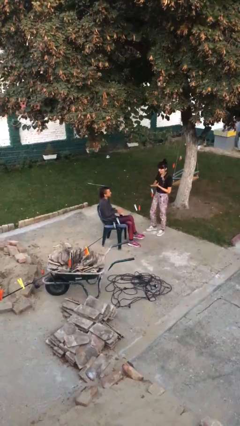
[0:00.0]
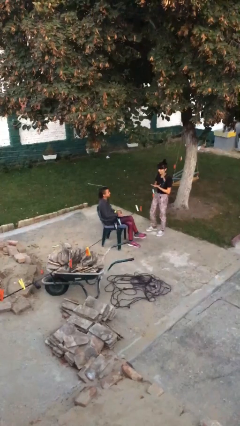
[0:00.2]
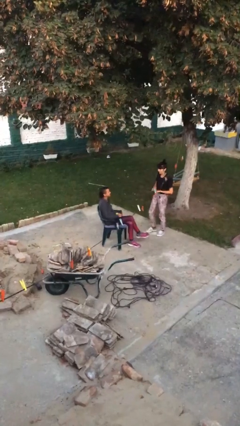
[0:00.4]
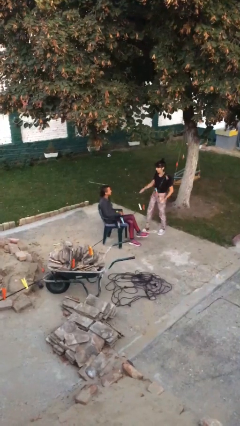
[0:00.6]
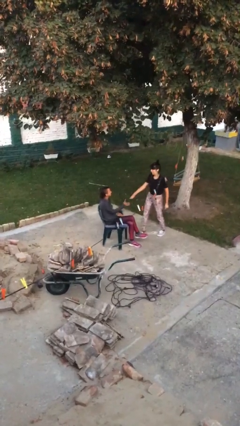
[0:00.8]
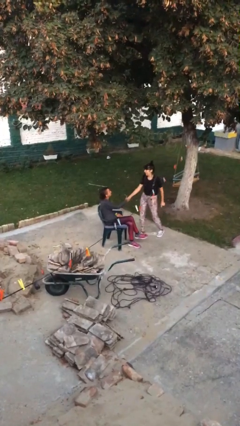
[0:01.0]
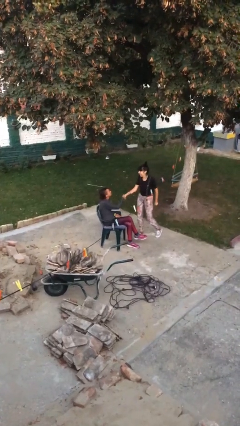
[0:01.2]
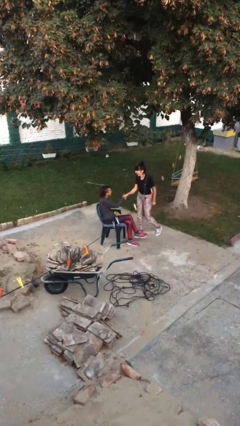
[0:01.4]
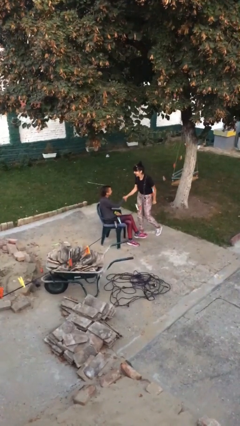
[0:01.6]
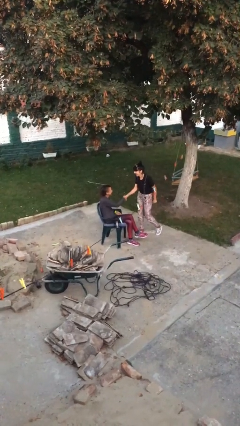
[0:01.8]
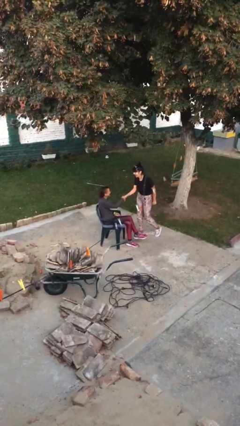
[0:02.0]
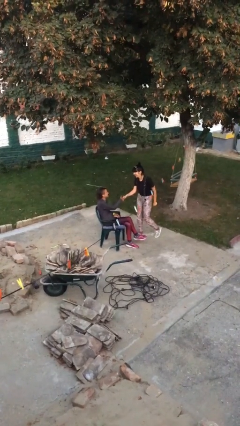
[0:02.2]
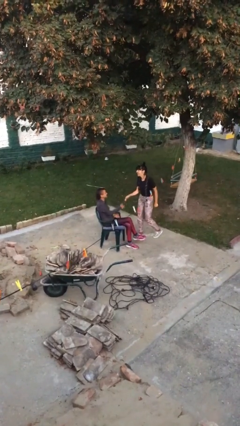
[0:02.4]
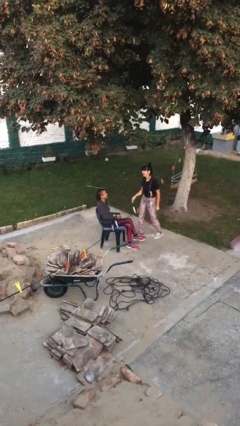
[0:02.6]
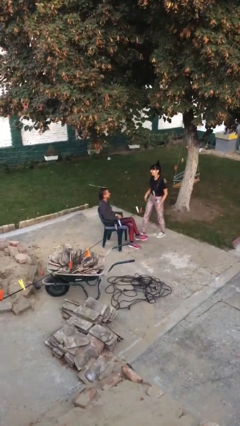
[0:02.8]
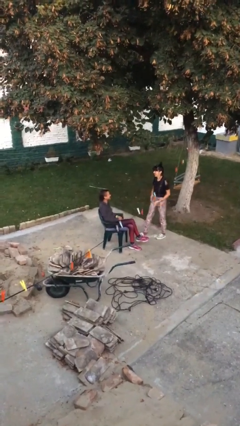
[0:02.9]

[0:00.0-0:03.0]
person shakes hand

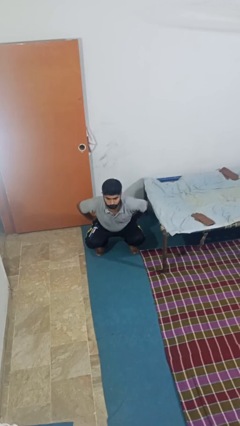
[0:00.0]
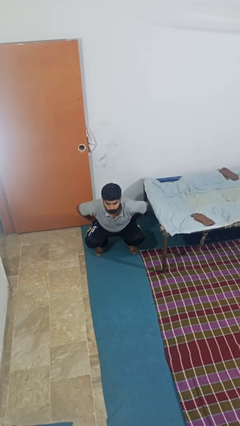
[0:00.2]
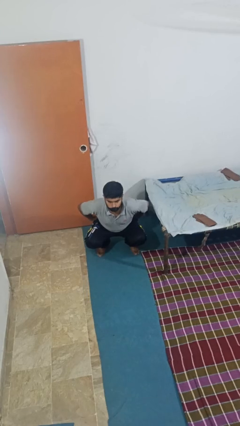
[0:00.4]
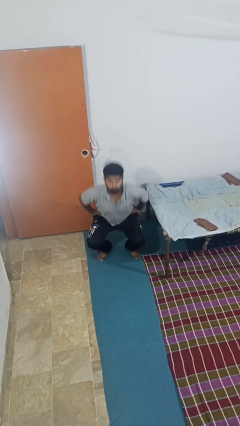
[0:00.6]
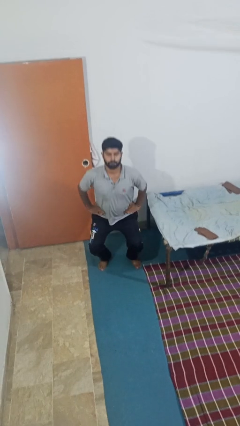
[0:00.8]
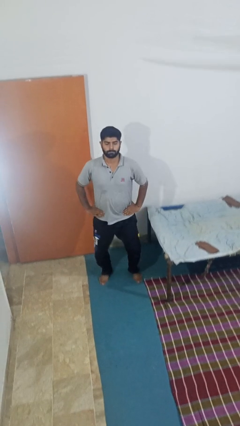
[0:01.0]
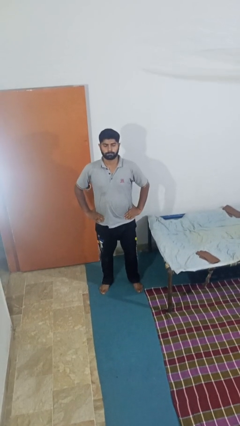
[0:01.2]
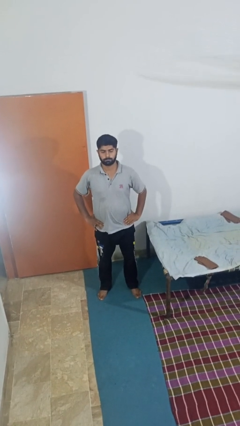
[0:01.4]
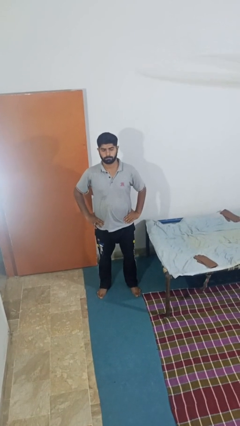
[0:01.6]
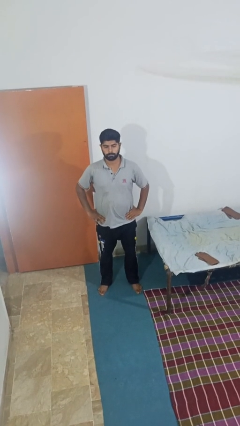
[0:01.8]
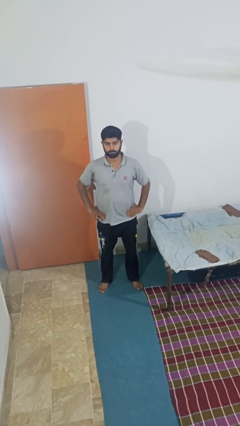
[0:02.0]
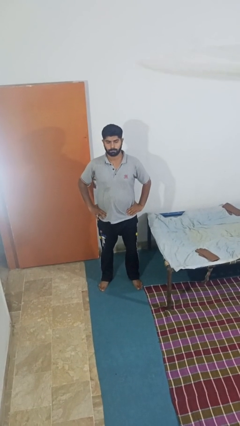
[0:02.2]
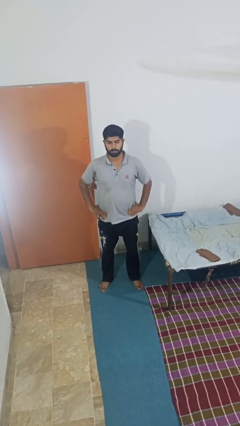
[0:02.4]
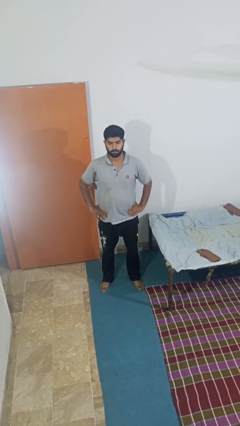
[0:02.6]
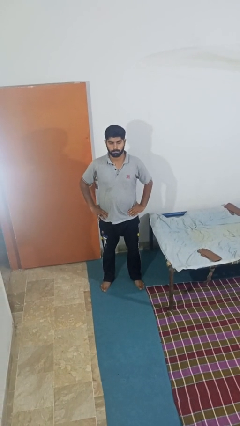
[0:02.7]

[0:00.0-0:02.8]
person stands up

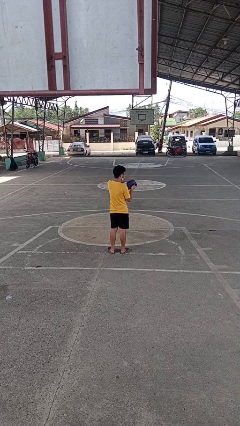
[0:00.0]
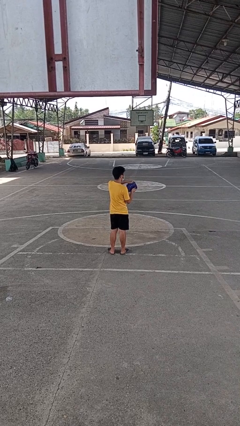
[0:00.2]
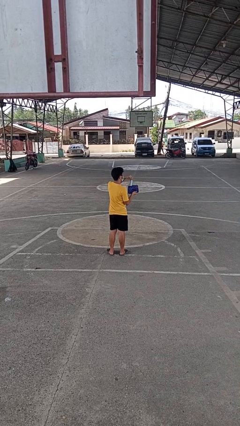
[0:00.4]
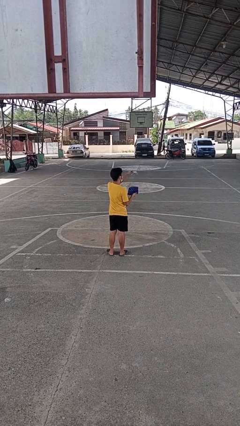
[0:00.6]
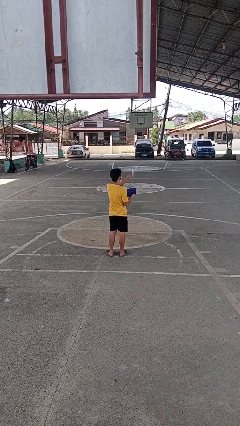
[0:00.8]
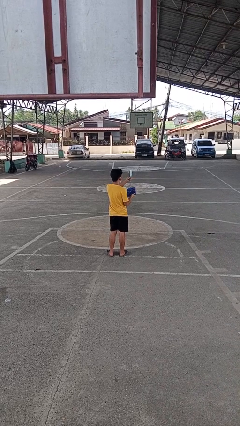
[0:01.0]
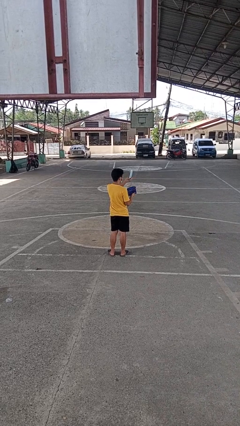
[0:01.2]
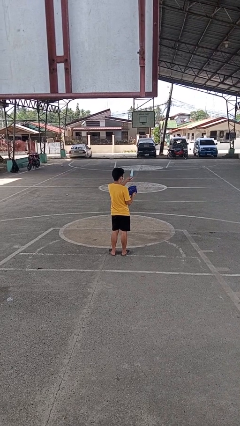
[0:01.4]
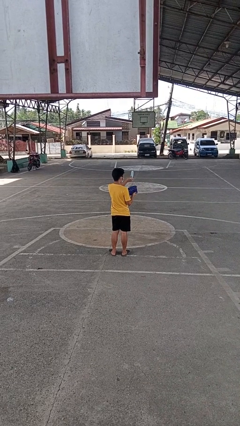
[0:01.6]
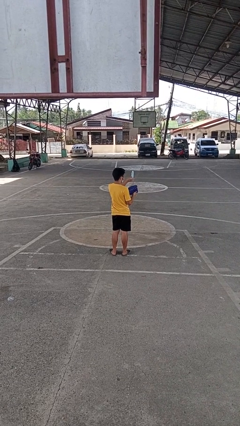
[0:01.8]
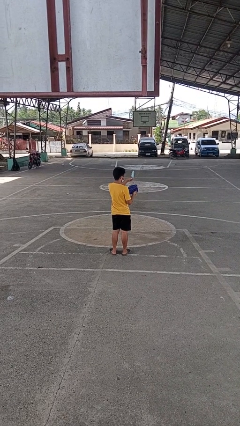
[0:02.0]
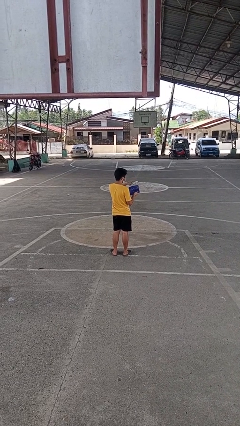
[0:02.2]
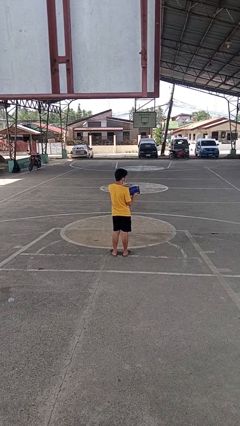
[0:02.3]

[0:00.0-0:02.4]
person takes object from purse

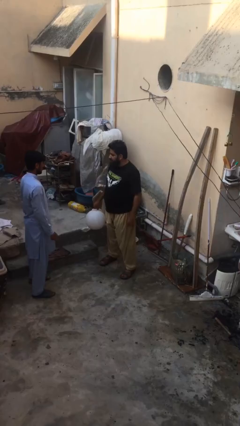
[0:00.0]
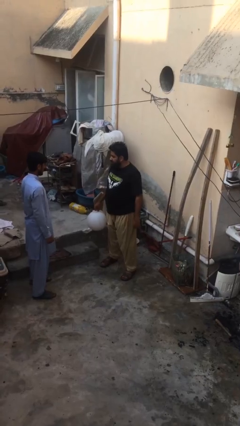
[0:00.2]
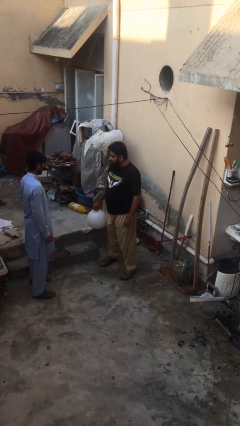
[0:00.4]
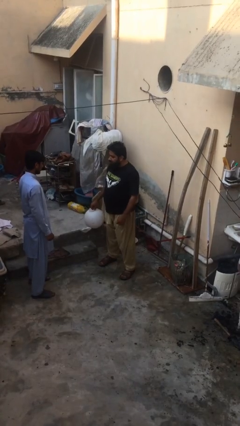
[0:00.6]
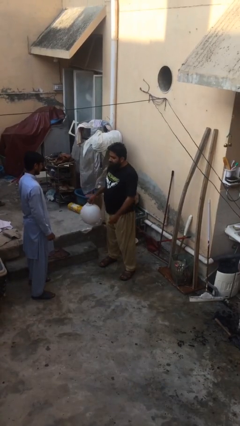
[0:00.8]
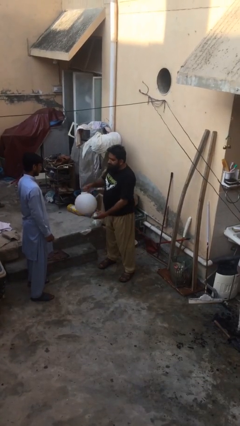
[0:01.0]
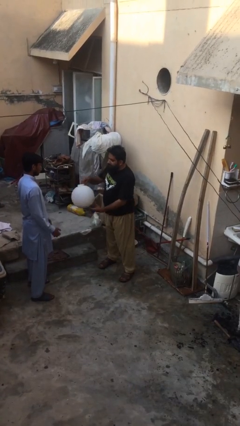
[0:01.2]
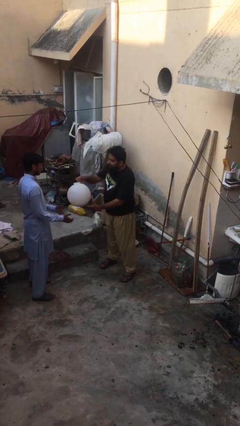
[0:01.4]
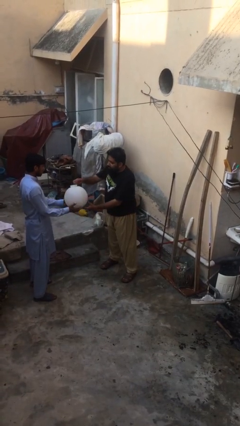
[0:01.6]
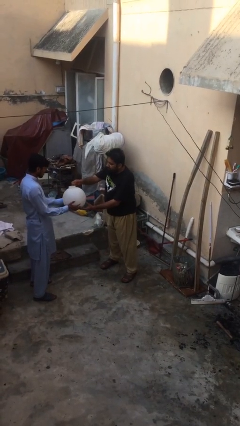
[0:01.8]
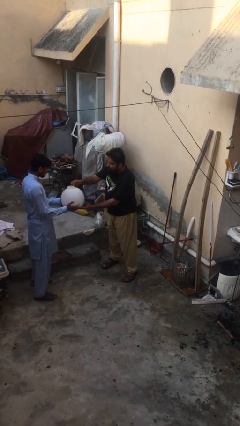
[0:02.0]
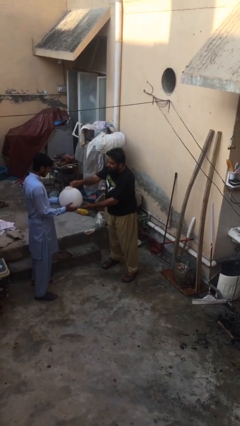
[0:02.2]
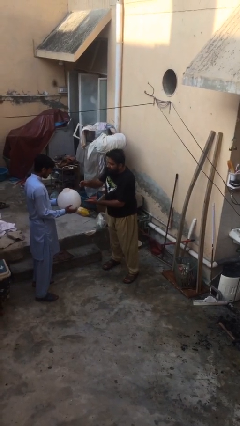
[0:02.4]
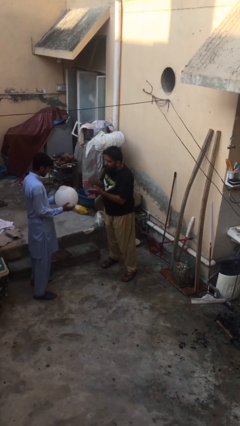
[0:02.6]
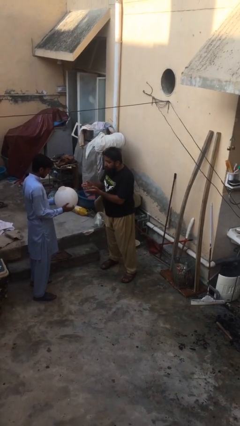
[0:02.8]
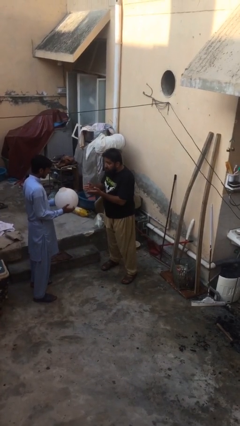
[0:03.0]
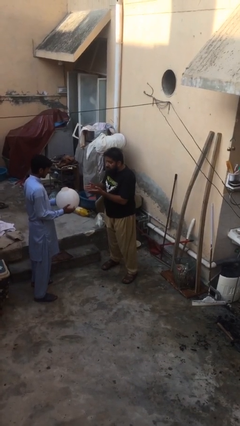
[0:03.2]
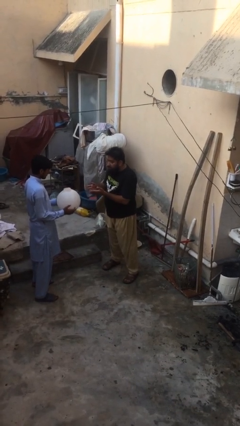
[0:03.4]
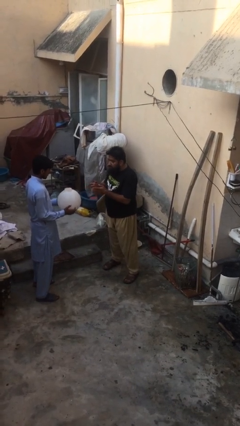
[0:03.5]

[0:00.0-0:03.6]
person transfers object to person

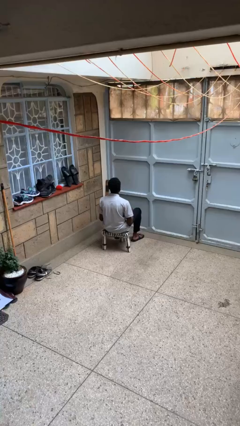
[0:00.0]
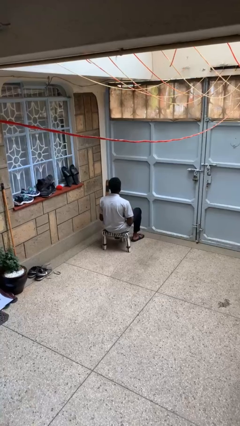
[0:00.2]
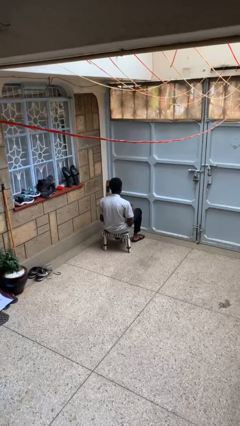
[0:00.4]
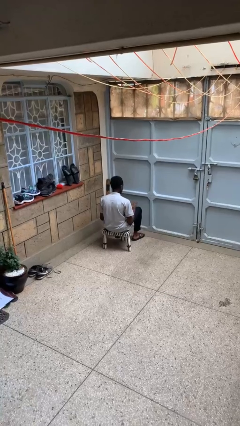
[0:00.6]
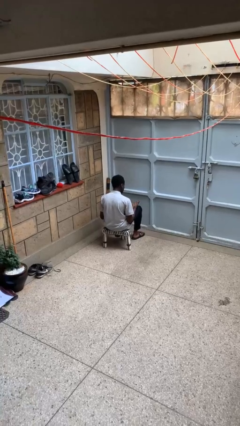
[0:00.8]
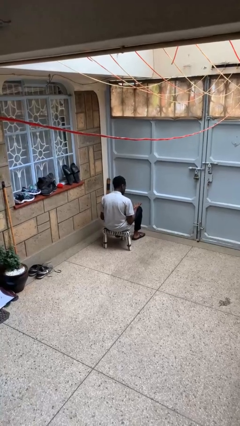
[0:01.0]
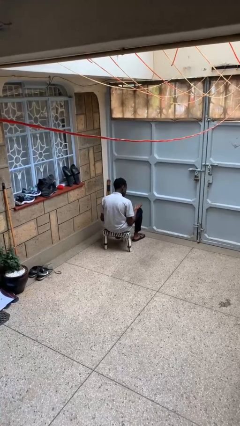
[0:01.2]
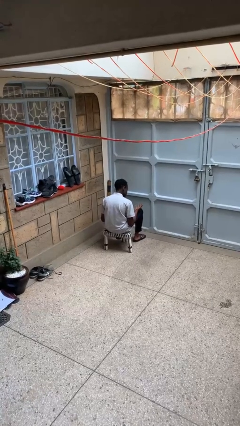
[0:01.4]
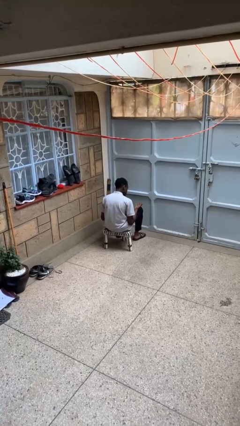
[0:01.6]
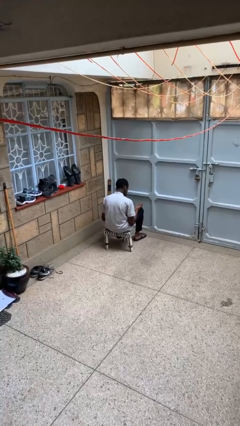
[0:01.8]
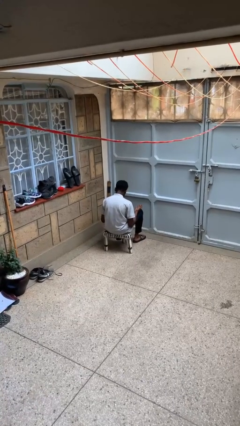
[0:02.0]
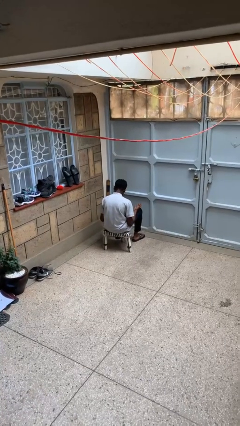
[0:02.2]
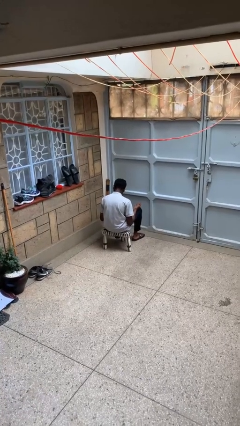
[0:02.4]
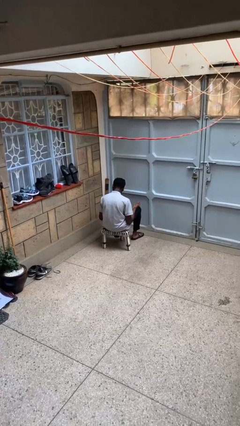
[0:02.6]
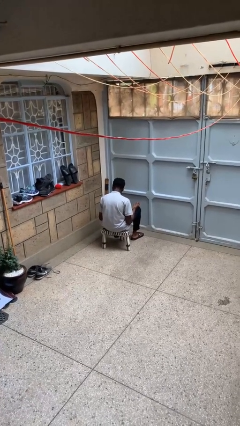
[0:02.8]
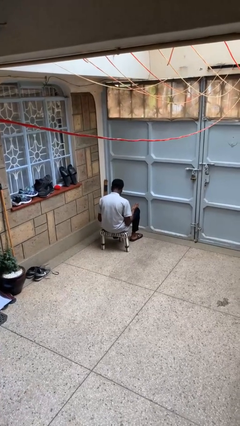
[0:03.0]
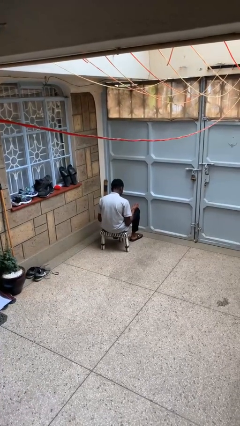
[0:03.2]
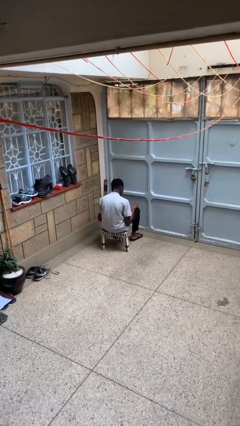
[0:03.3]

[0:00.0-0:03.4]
person looks at hands in lap

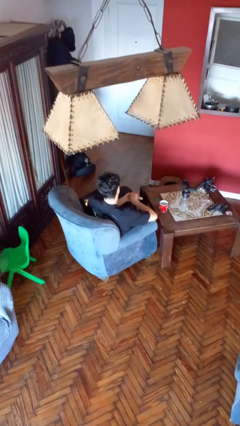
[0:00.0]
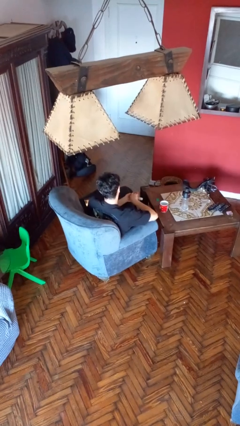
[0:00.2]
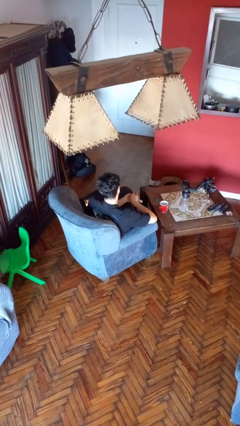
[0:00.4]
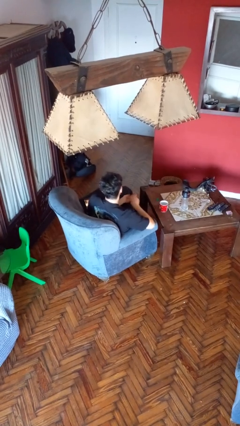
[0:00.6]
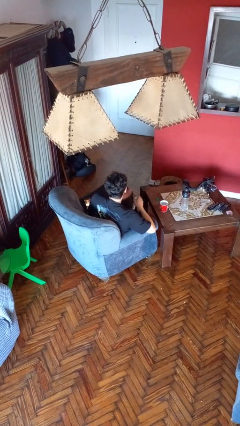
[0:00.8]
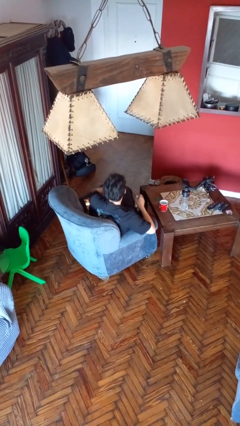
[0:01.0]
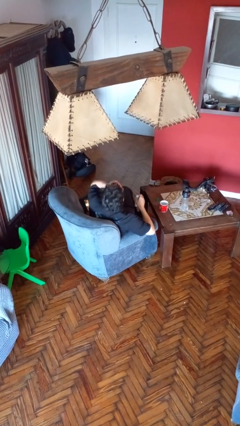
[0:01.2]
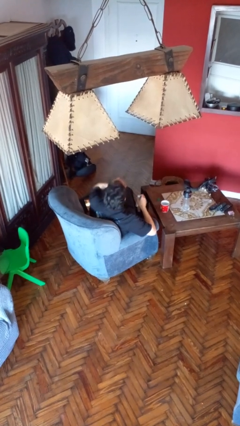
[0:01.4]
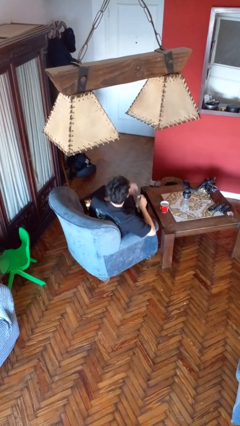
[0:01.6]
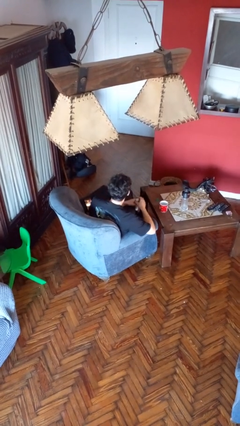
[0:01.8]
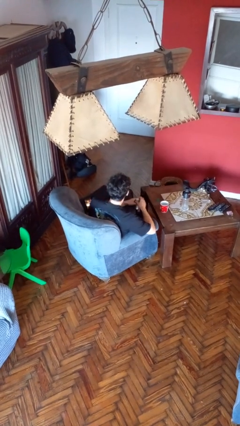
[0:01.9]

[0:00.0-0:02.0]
person takes medicine pills

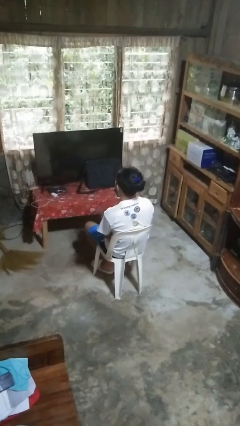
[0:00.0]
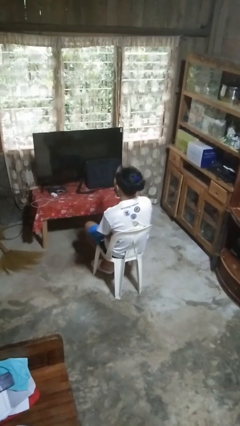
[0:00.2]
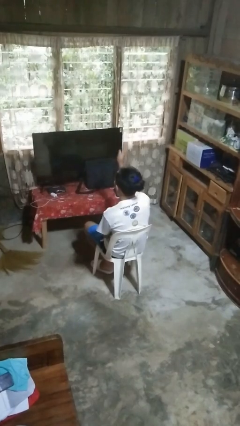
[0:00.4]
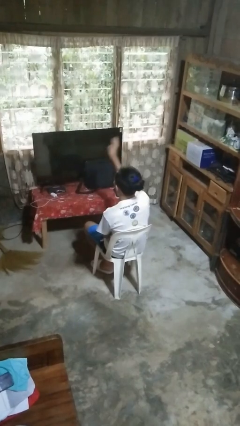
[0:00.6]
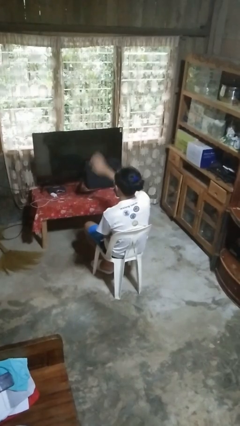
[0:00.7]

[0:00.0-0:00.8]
person gestures swipe down
